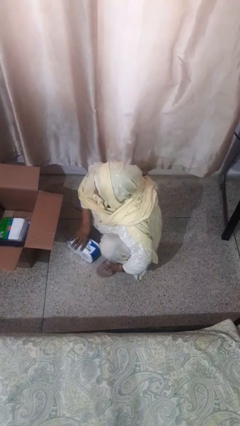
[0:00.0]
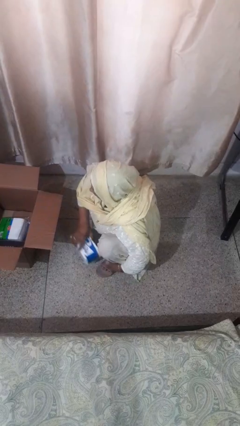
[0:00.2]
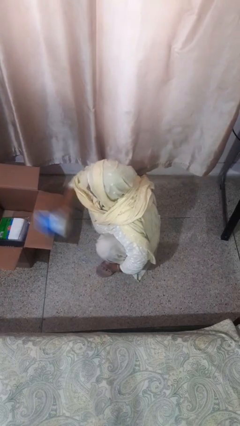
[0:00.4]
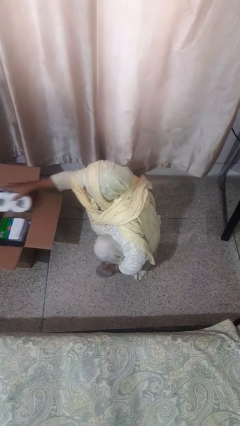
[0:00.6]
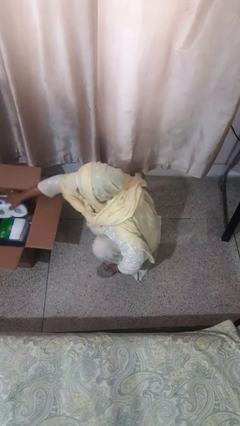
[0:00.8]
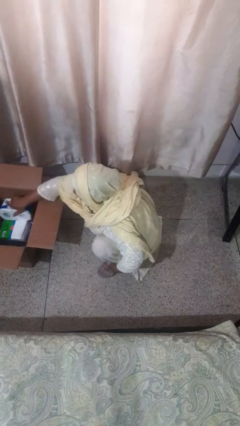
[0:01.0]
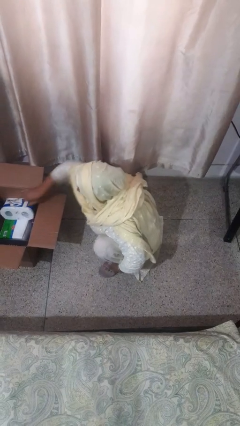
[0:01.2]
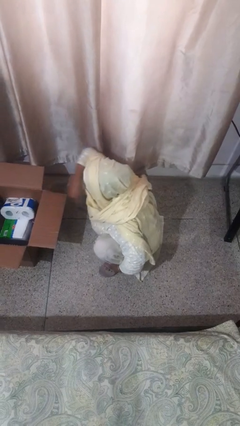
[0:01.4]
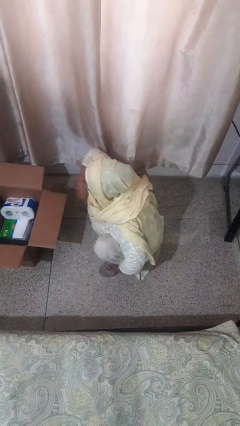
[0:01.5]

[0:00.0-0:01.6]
person puts object into box

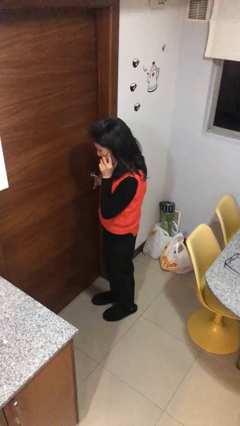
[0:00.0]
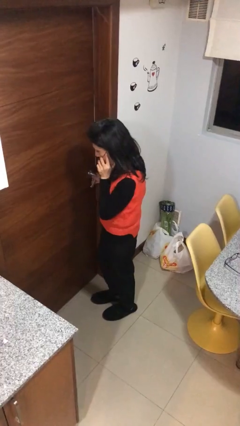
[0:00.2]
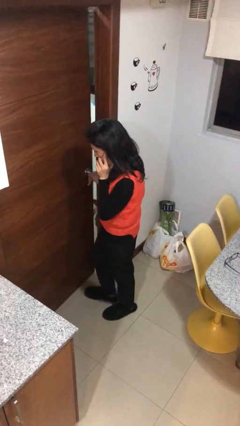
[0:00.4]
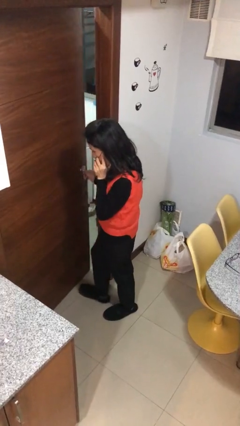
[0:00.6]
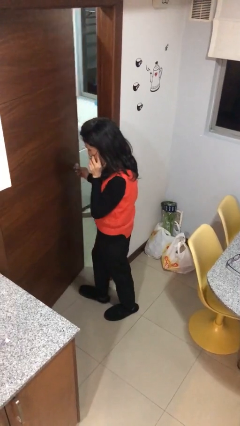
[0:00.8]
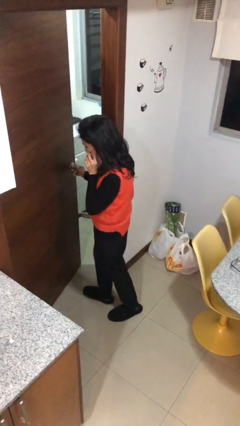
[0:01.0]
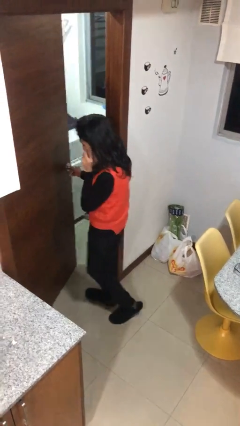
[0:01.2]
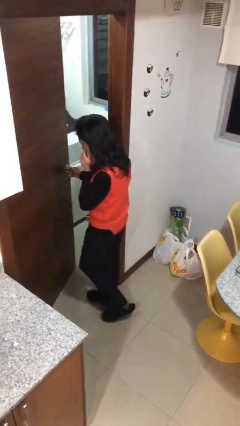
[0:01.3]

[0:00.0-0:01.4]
person opens facility door

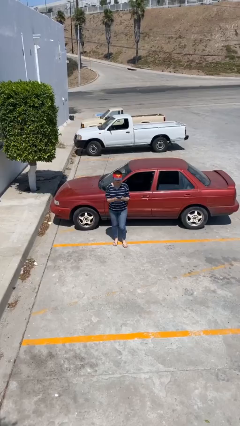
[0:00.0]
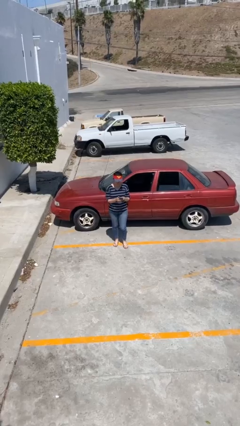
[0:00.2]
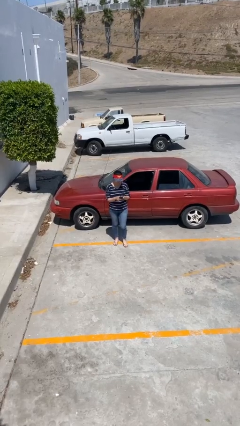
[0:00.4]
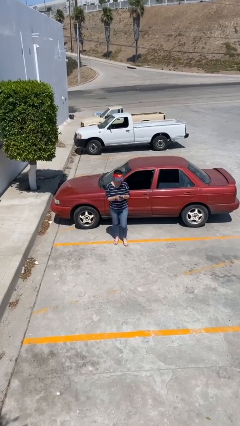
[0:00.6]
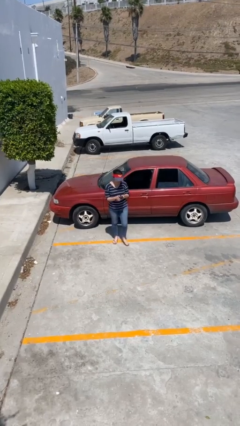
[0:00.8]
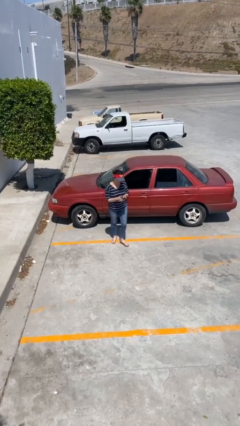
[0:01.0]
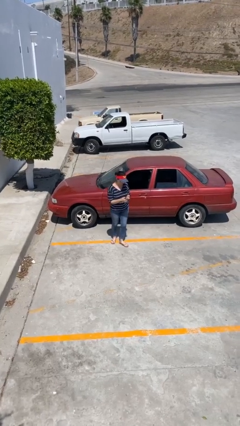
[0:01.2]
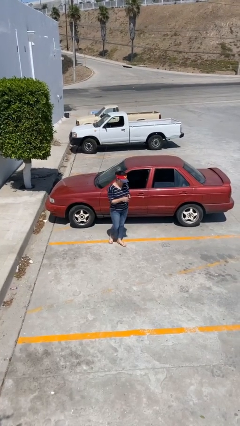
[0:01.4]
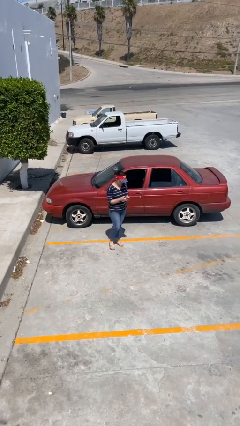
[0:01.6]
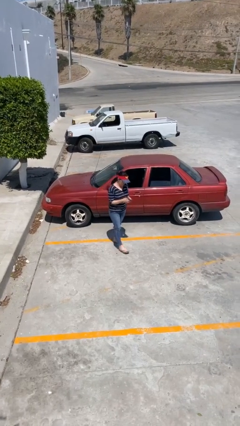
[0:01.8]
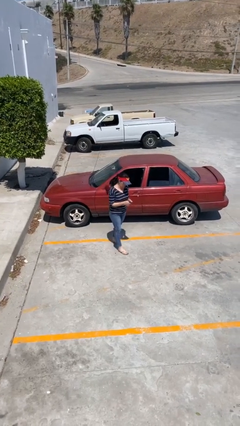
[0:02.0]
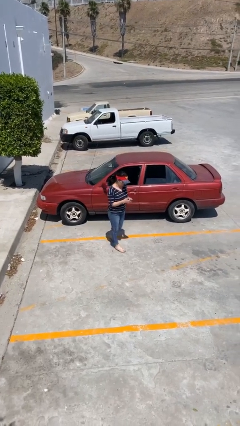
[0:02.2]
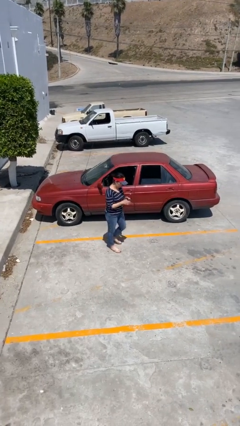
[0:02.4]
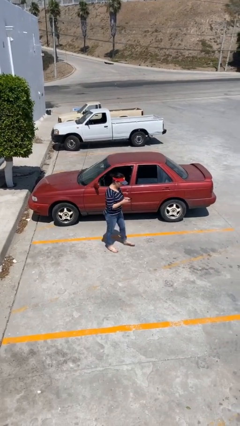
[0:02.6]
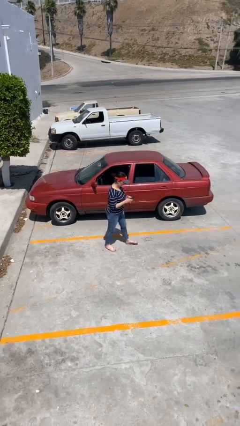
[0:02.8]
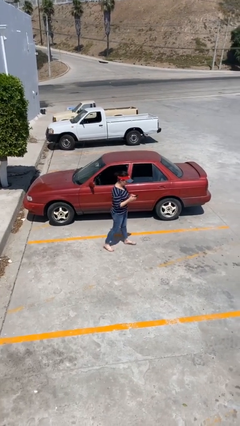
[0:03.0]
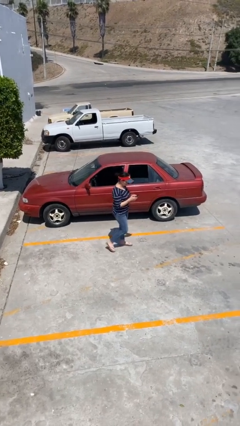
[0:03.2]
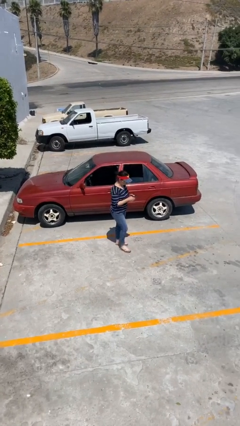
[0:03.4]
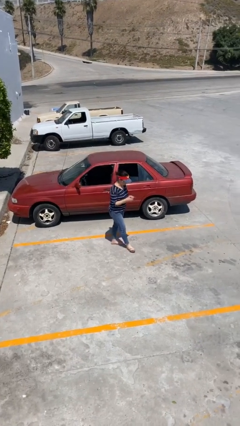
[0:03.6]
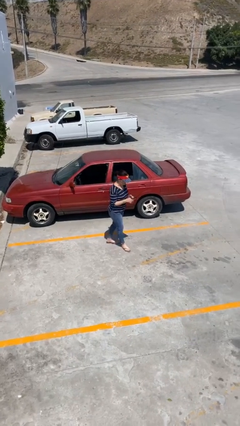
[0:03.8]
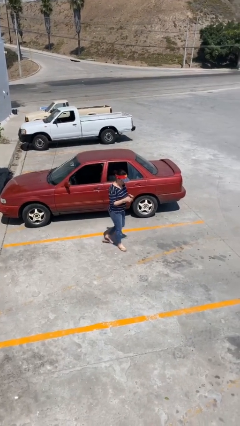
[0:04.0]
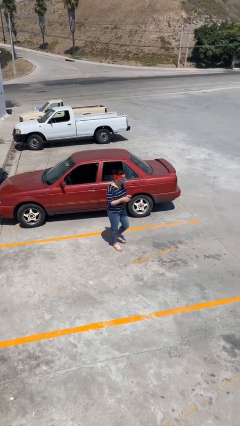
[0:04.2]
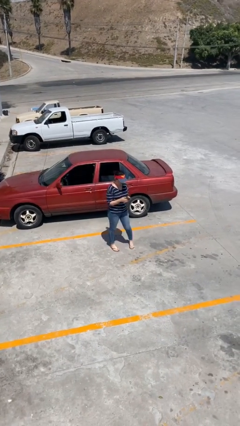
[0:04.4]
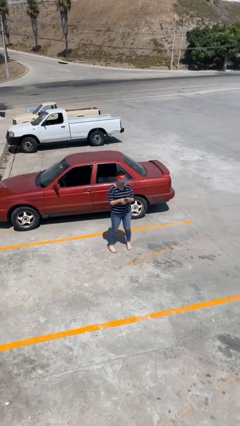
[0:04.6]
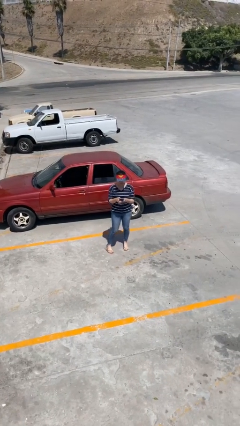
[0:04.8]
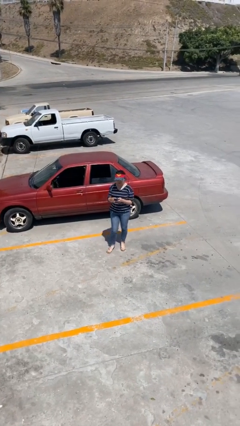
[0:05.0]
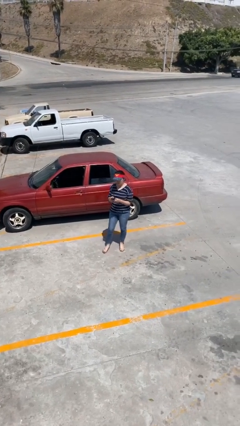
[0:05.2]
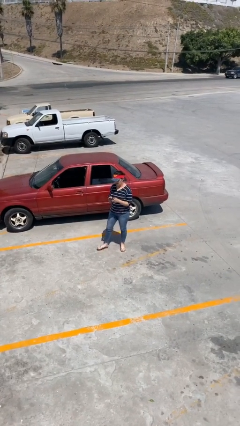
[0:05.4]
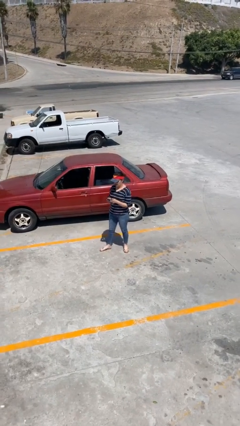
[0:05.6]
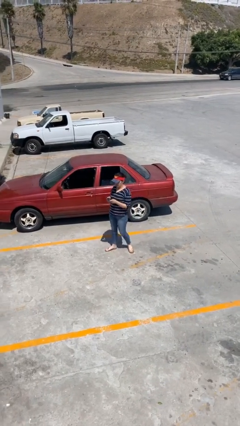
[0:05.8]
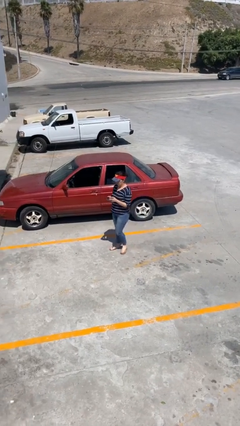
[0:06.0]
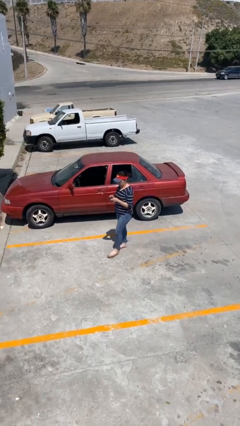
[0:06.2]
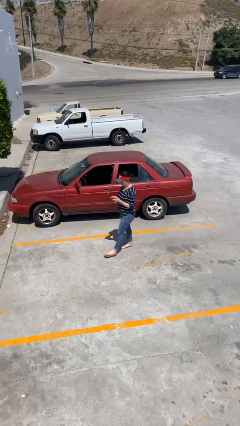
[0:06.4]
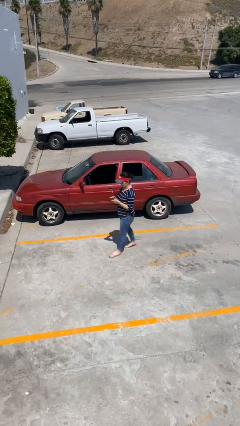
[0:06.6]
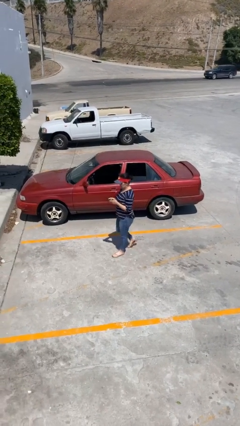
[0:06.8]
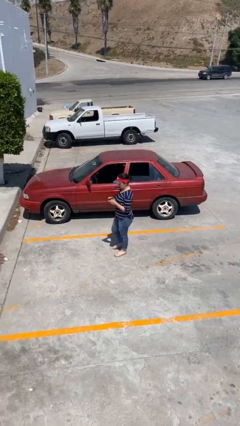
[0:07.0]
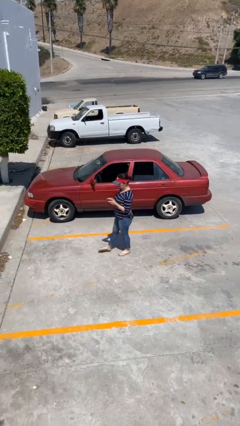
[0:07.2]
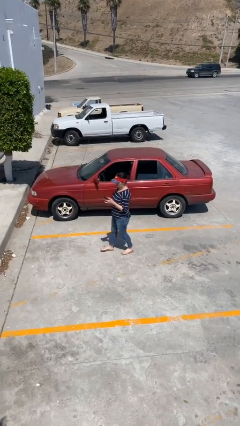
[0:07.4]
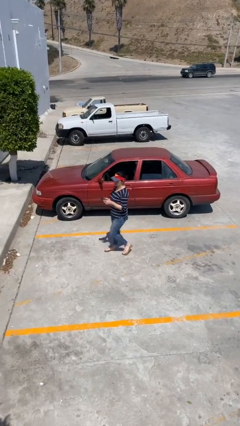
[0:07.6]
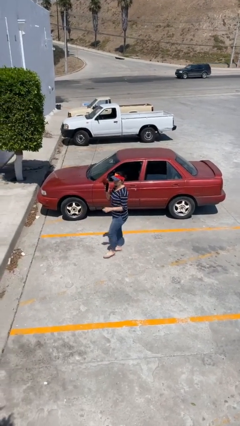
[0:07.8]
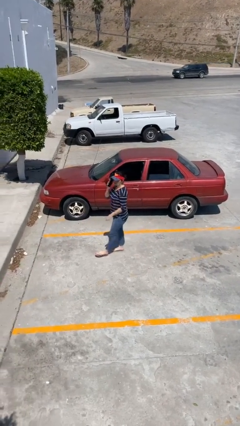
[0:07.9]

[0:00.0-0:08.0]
person texts on phone

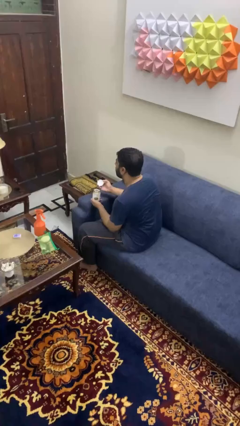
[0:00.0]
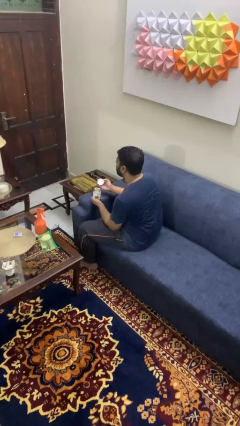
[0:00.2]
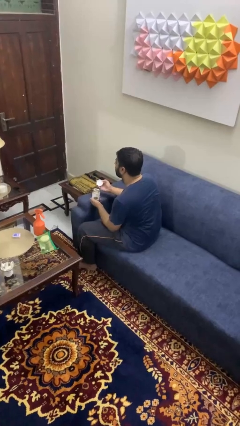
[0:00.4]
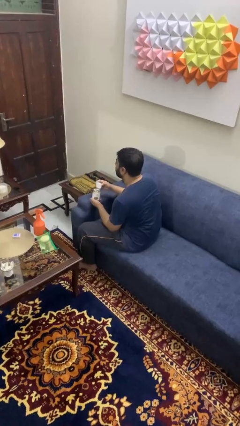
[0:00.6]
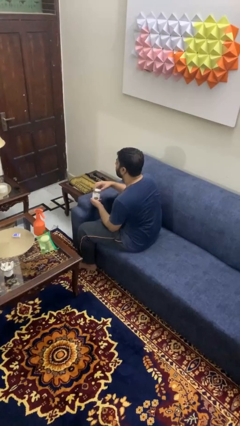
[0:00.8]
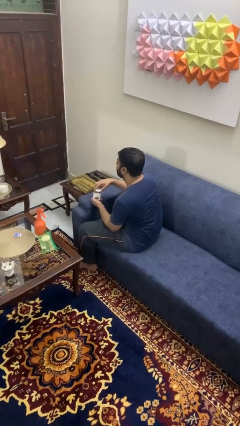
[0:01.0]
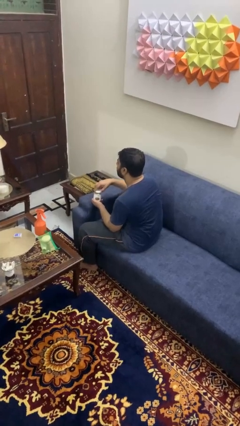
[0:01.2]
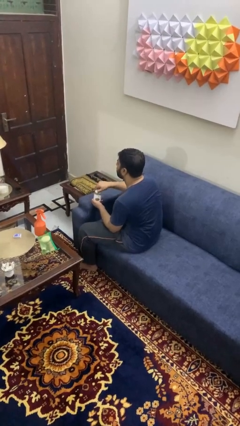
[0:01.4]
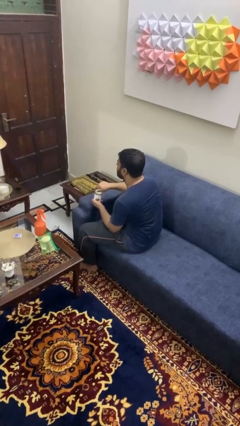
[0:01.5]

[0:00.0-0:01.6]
person closes jar

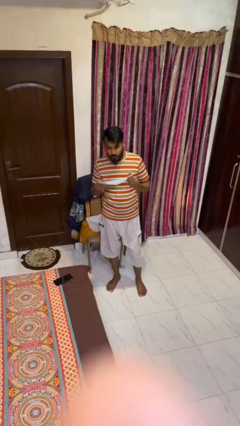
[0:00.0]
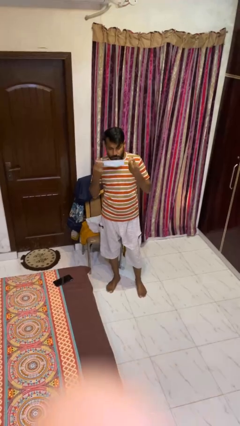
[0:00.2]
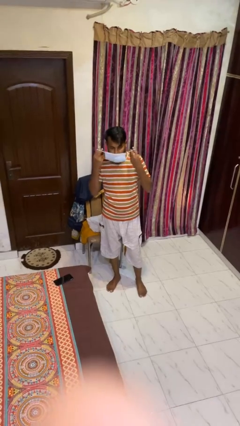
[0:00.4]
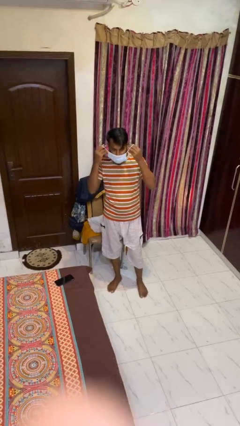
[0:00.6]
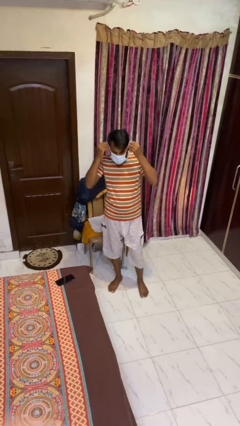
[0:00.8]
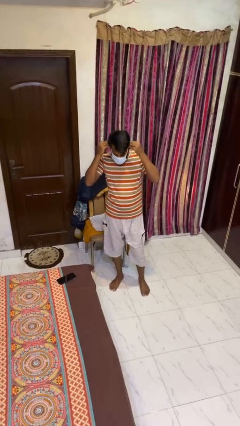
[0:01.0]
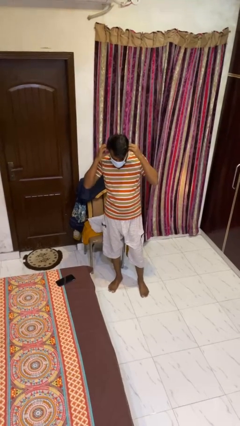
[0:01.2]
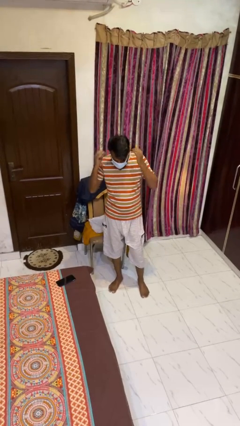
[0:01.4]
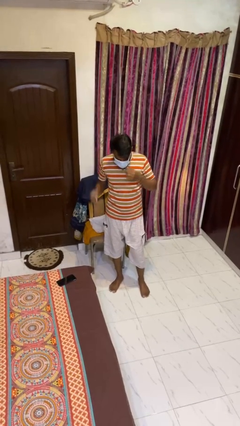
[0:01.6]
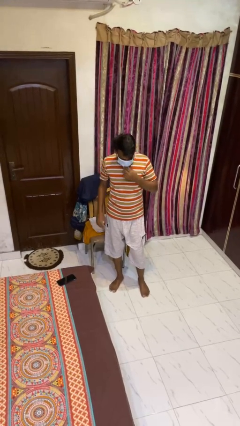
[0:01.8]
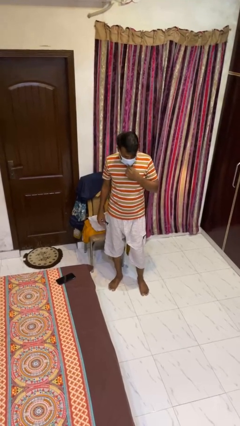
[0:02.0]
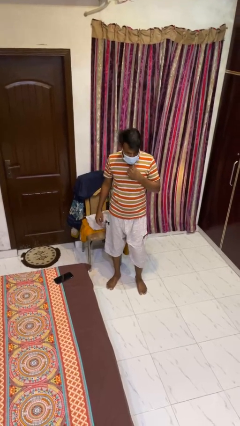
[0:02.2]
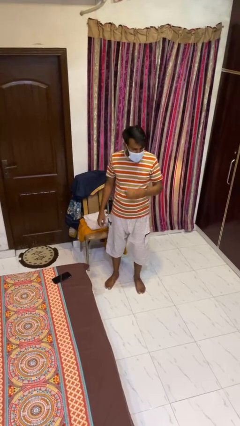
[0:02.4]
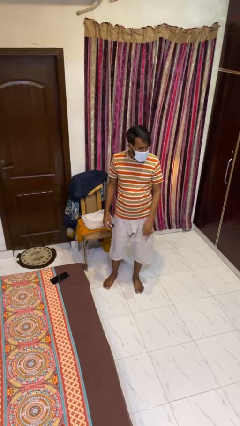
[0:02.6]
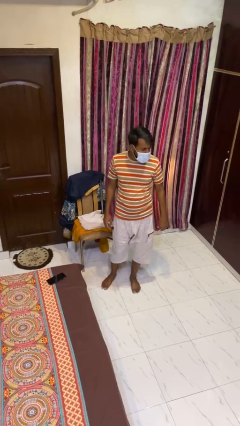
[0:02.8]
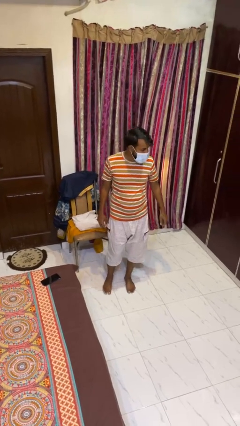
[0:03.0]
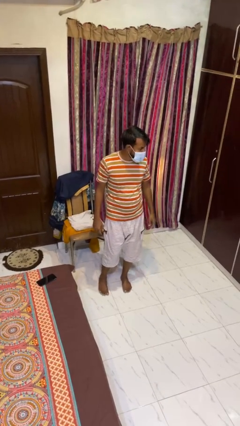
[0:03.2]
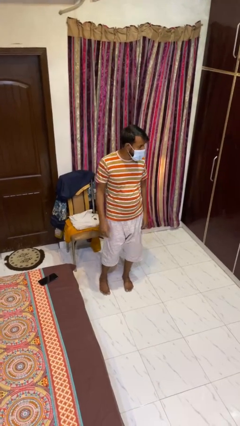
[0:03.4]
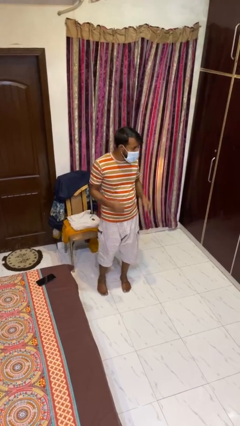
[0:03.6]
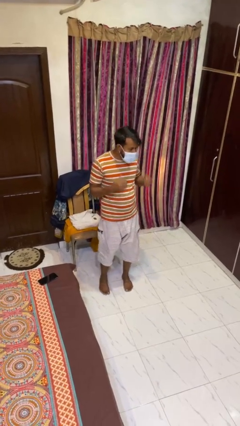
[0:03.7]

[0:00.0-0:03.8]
person puts on facemask

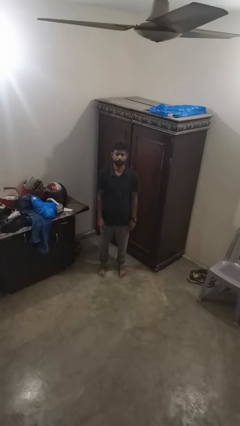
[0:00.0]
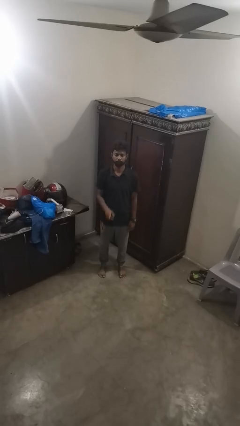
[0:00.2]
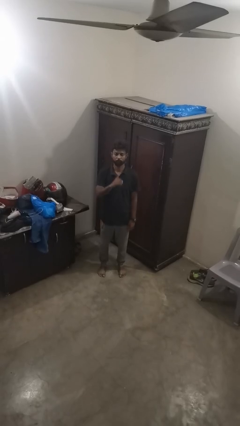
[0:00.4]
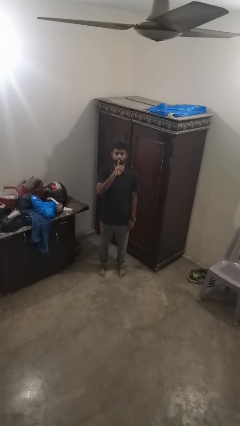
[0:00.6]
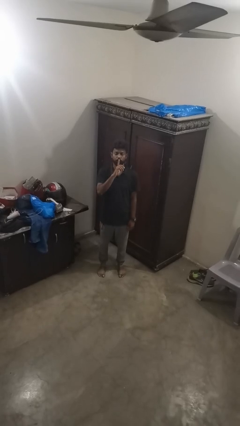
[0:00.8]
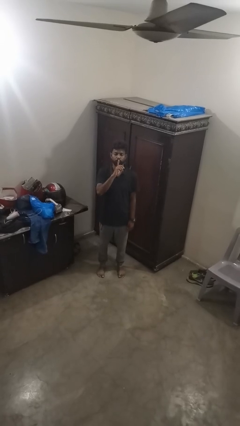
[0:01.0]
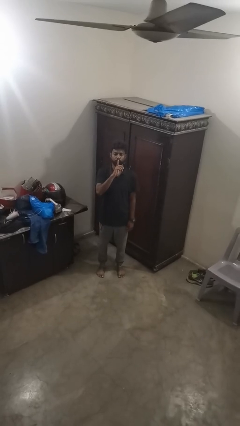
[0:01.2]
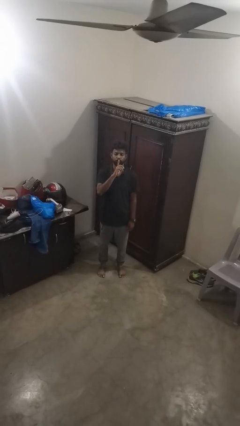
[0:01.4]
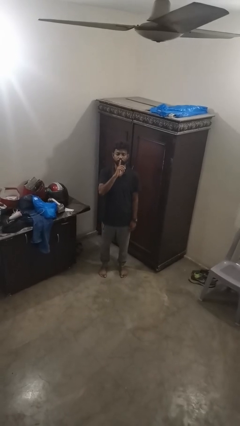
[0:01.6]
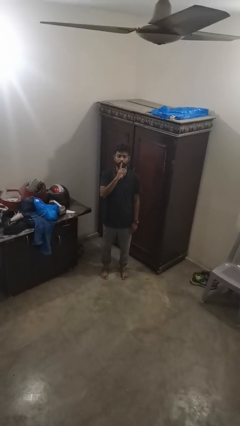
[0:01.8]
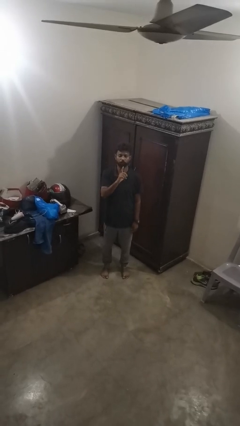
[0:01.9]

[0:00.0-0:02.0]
person gestures be quiet
